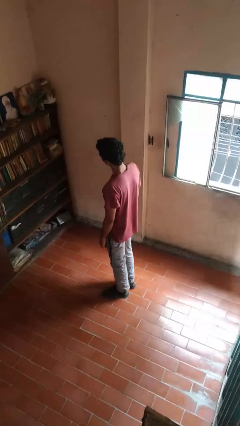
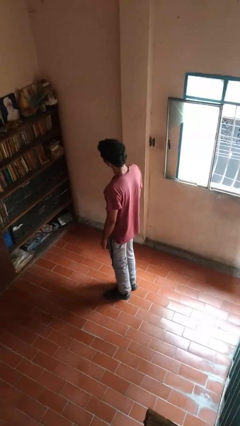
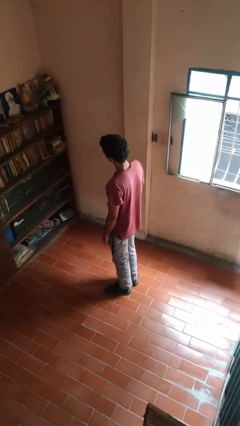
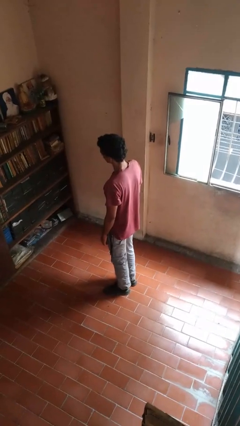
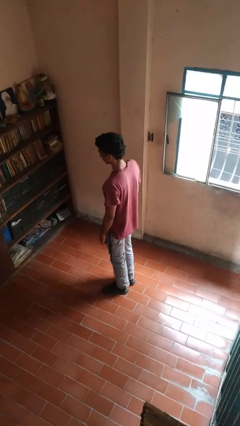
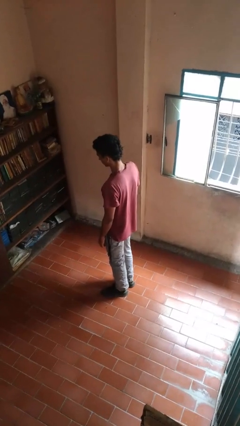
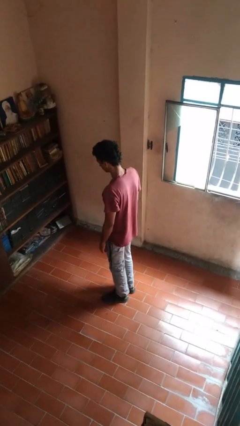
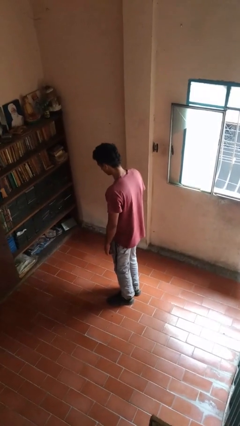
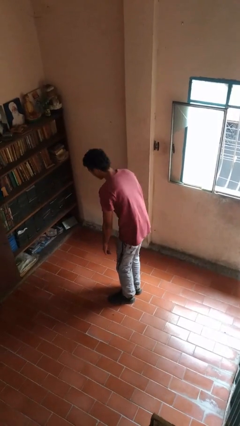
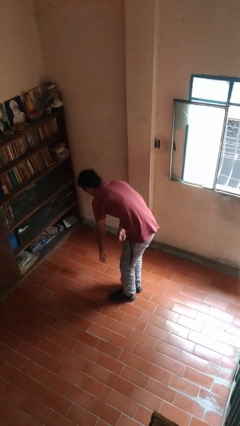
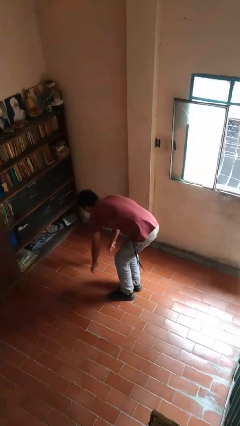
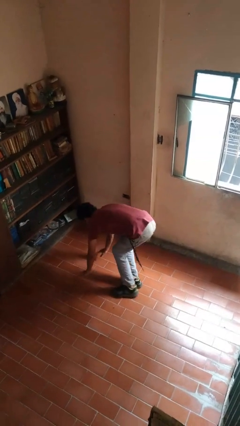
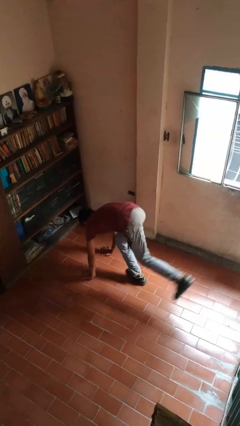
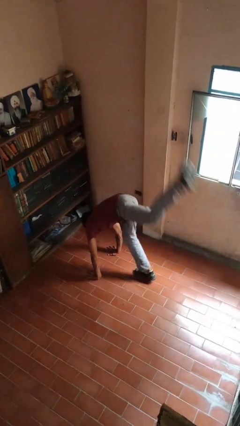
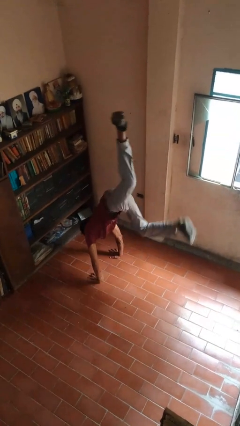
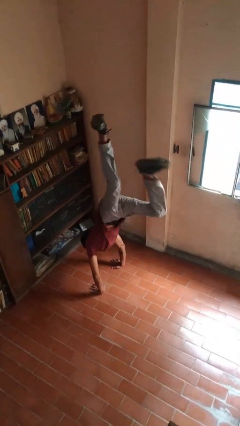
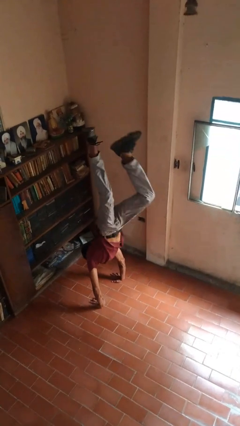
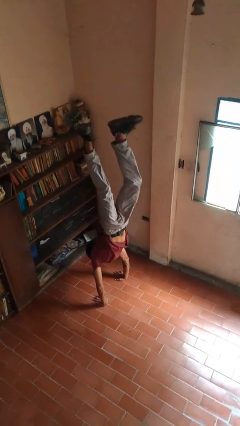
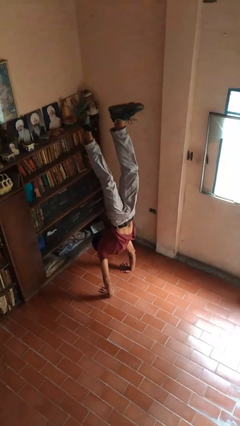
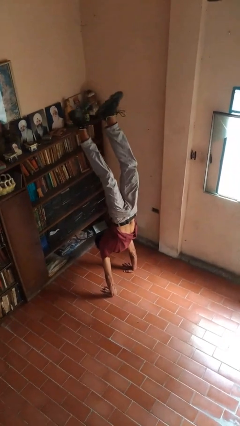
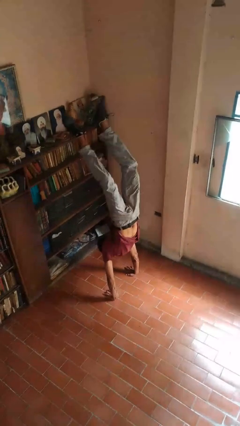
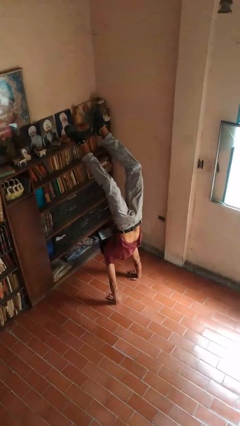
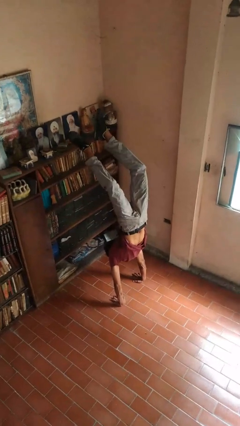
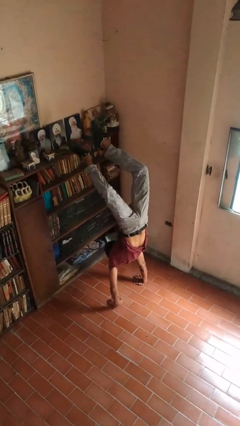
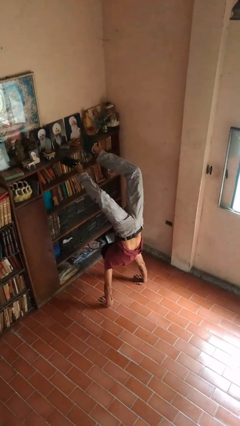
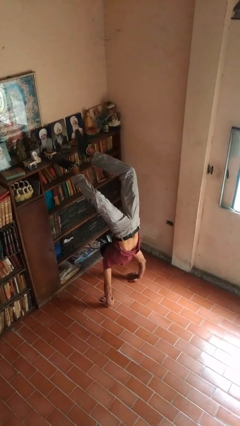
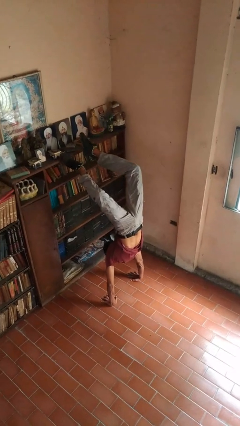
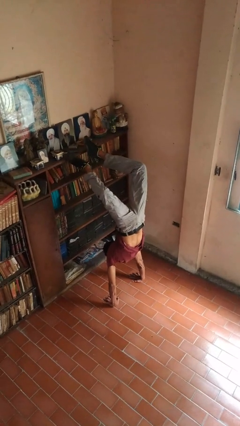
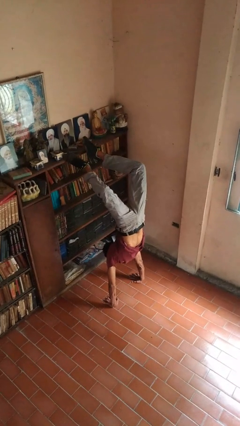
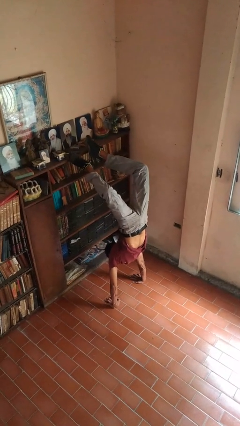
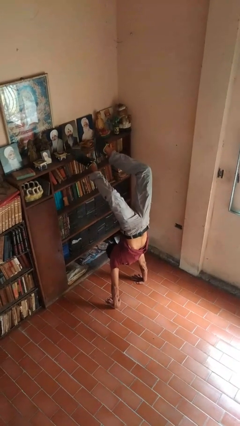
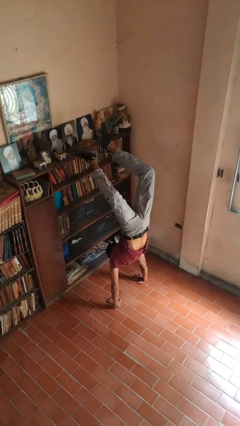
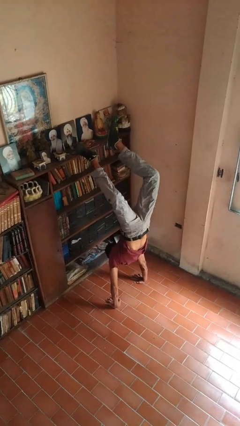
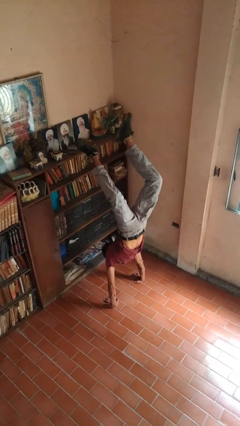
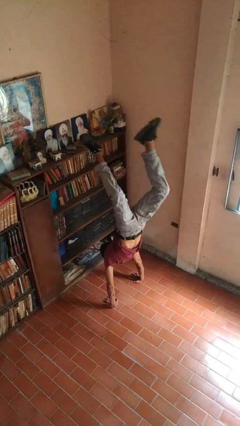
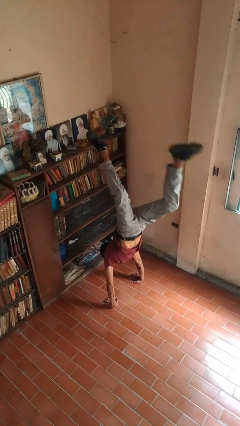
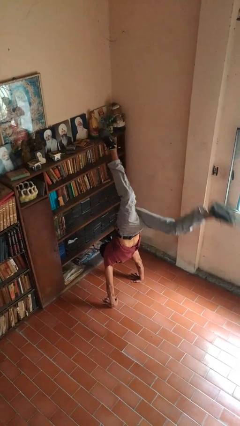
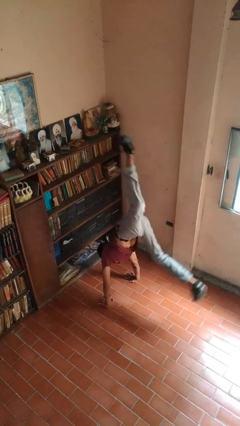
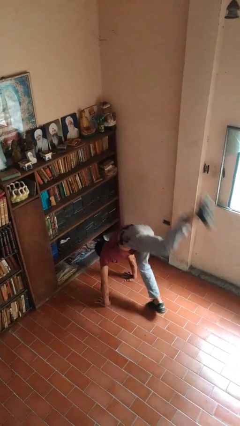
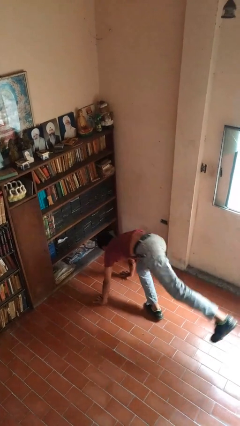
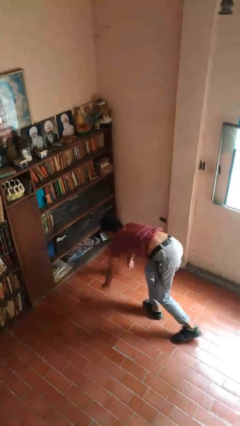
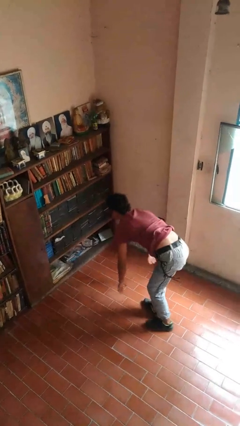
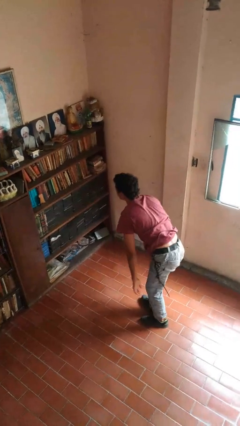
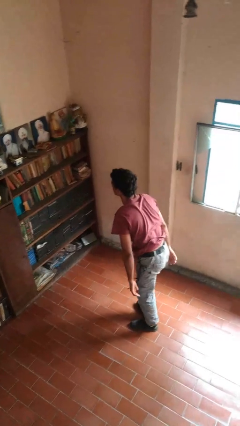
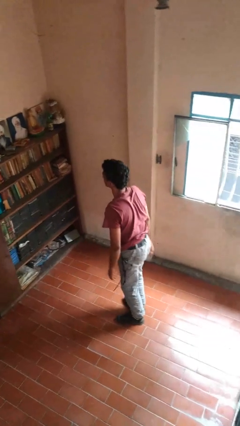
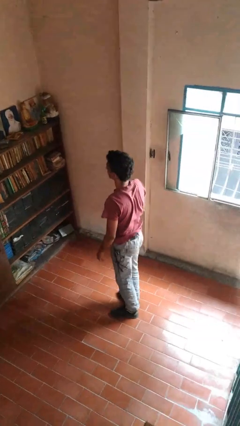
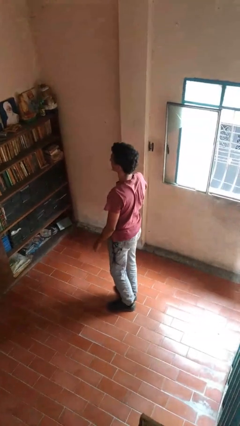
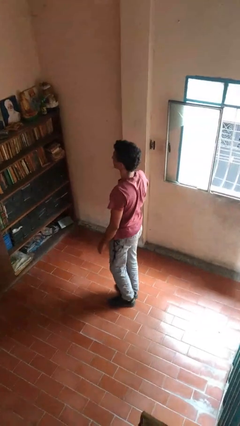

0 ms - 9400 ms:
person handstand

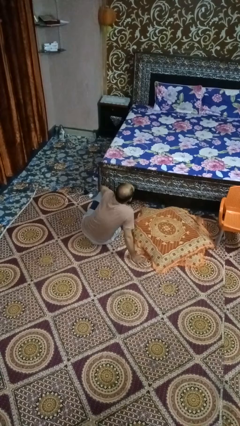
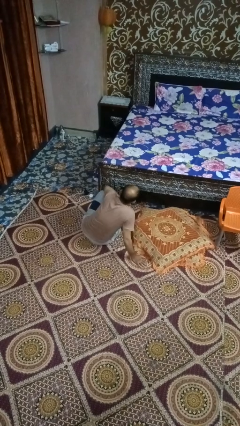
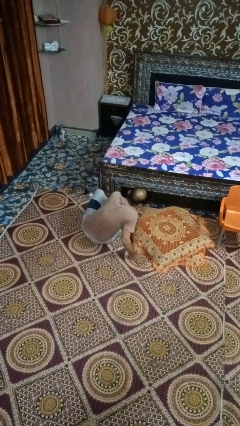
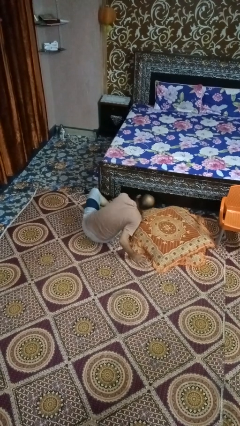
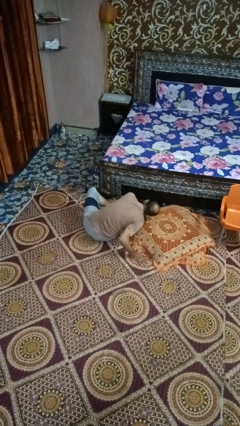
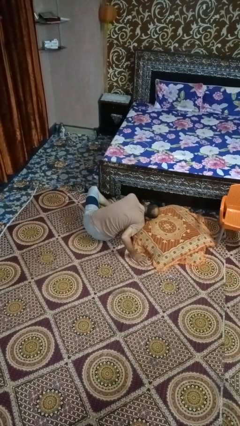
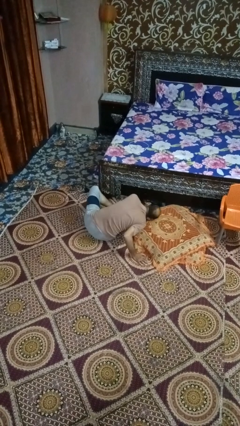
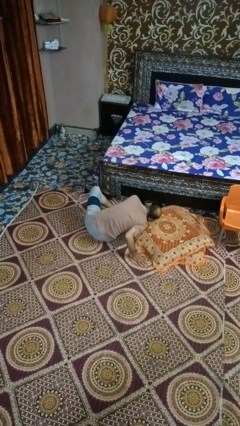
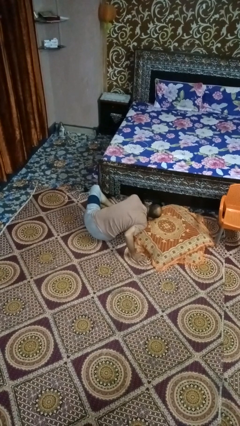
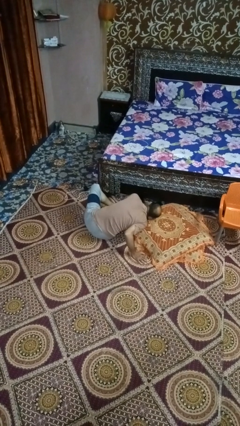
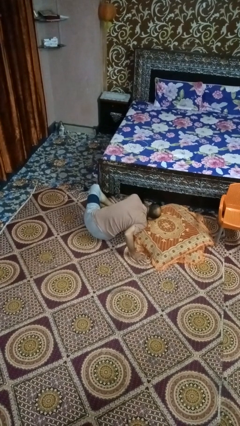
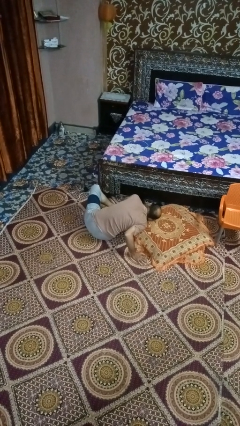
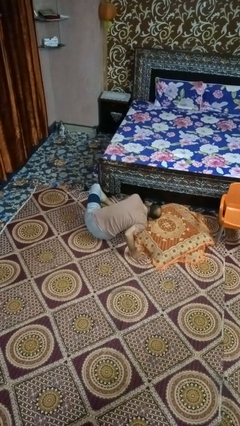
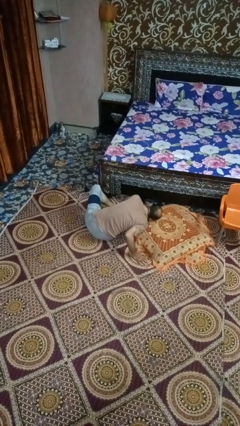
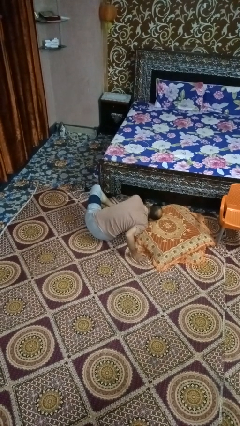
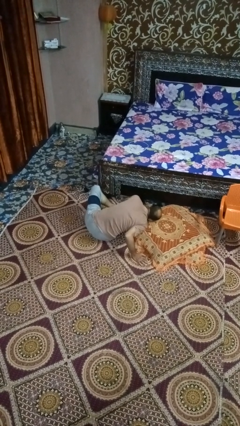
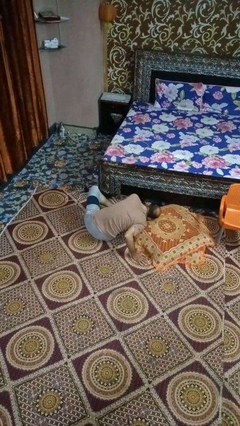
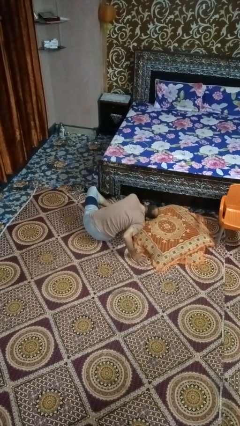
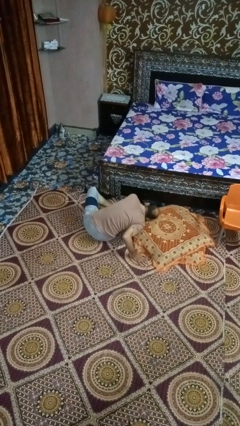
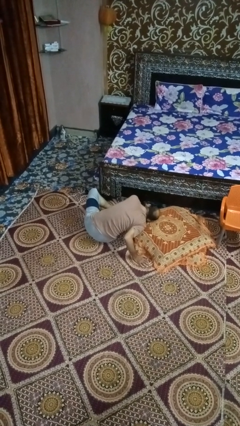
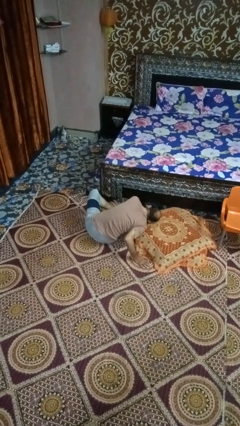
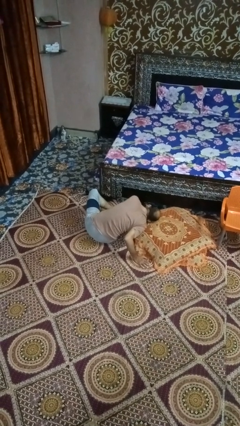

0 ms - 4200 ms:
person searches under bed

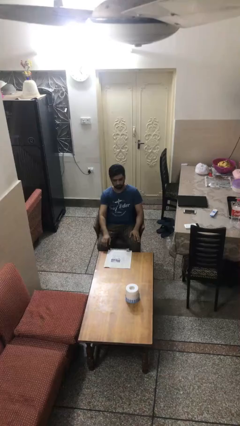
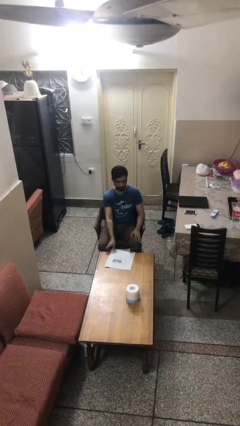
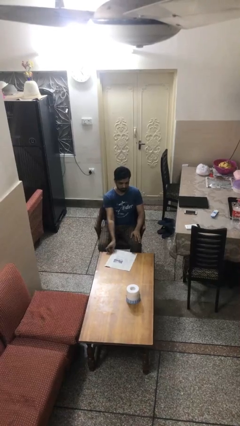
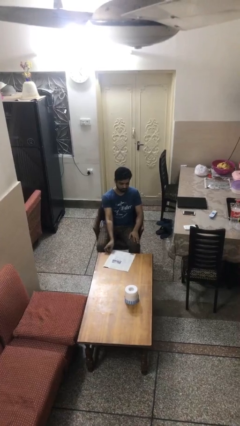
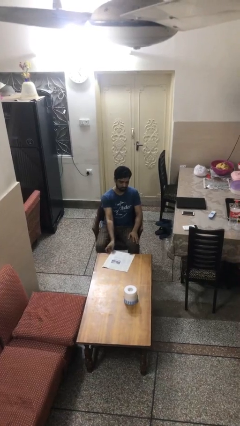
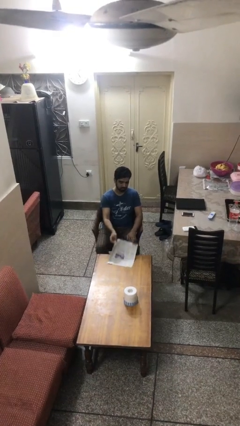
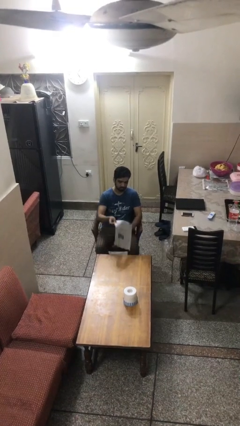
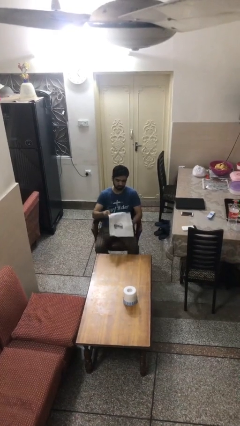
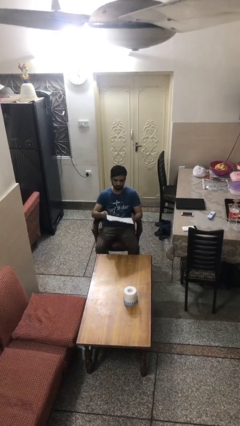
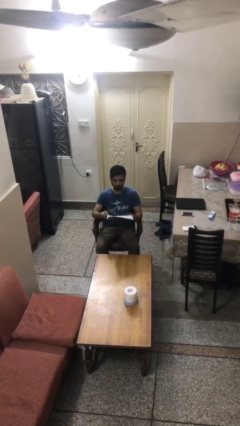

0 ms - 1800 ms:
person picks up object from table

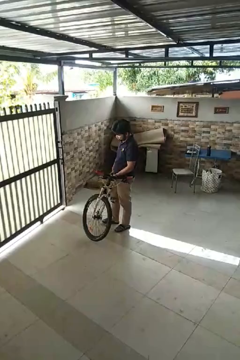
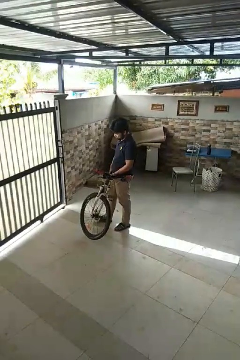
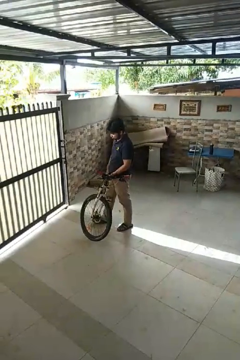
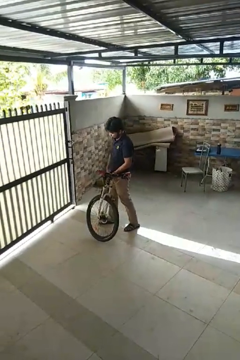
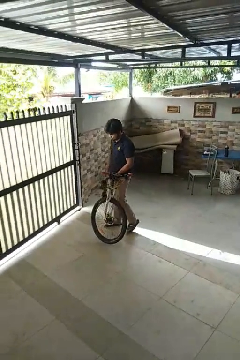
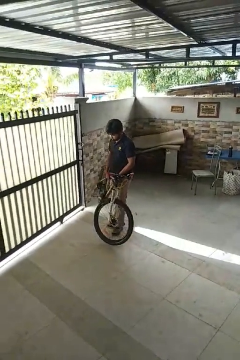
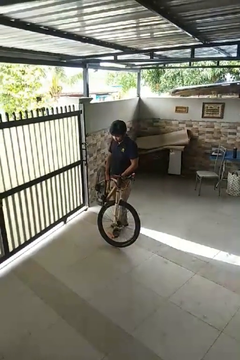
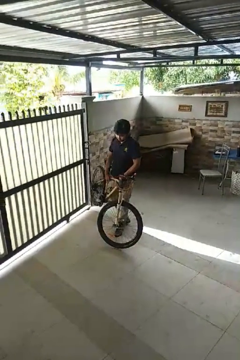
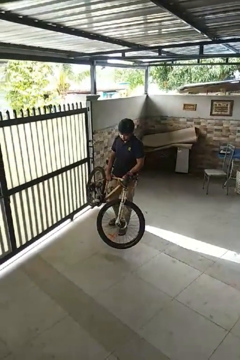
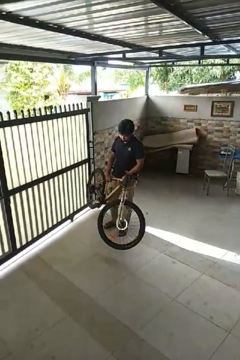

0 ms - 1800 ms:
person carries bicycle

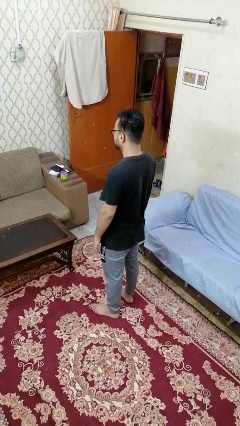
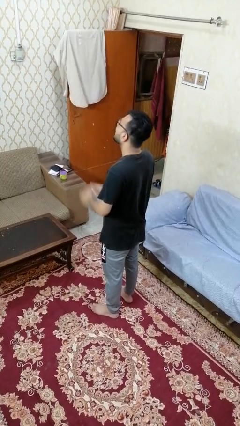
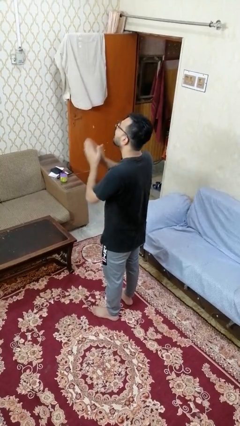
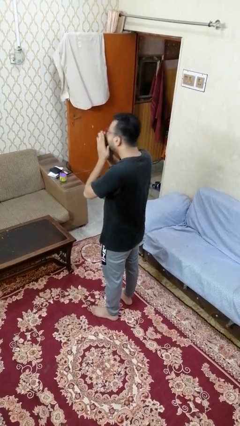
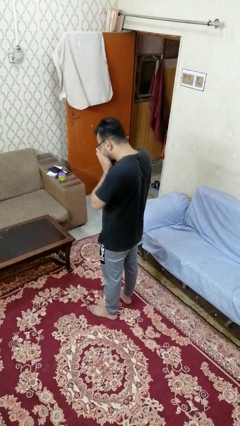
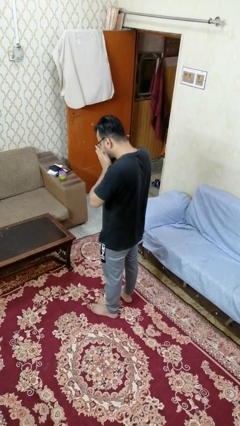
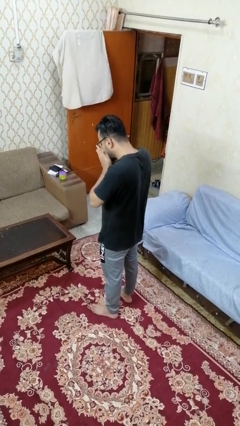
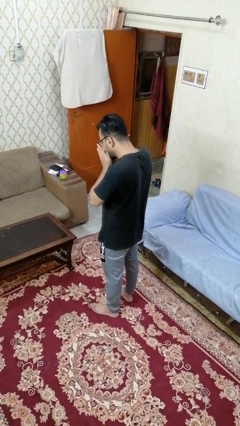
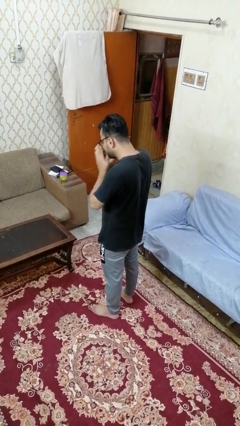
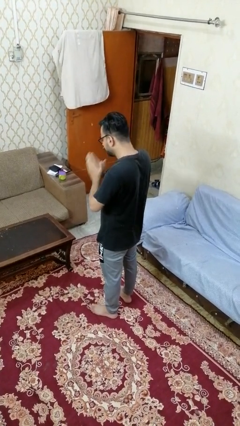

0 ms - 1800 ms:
person sneezes into hand
